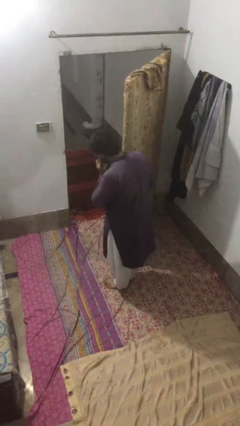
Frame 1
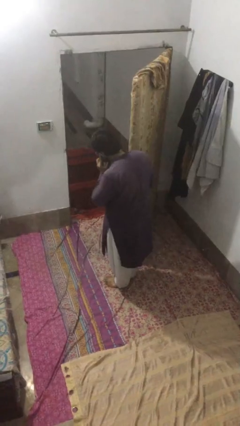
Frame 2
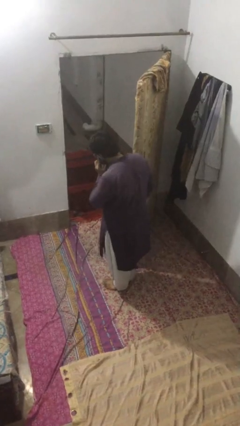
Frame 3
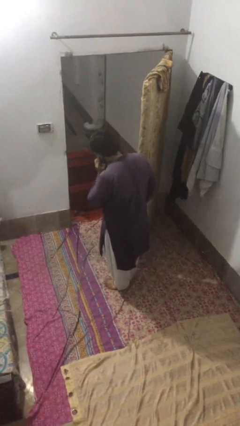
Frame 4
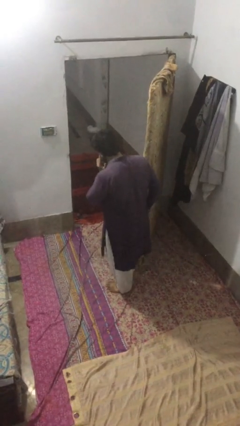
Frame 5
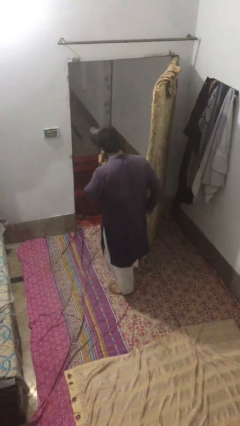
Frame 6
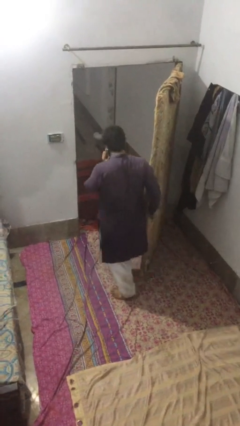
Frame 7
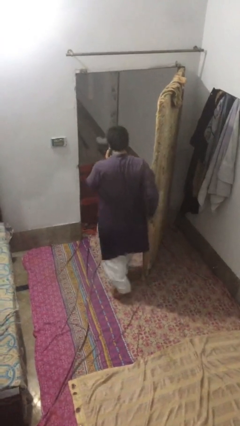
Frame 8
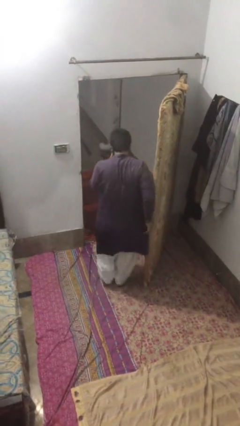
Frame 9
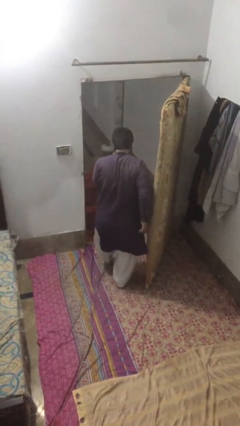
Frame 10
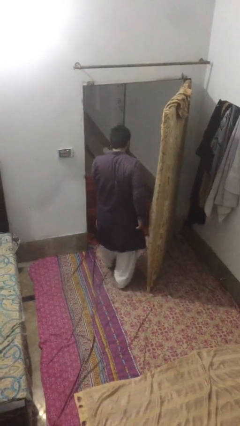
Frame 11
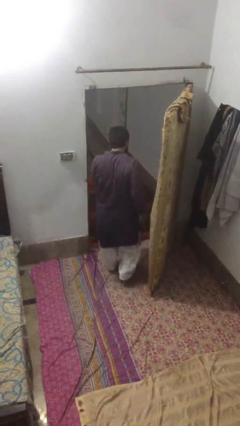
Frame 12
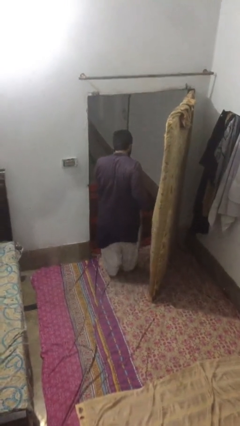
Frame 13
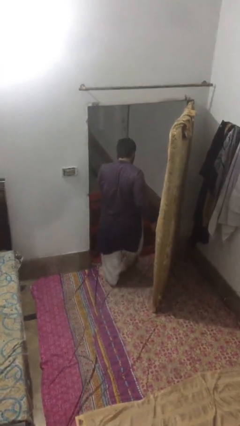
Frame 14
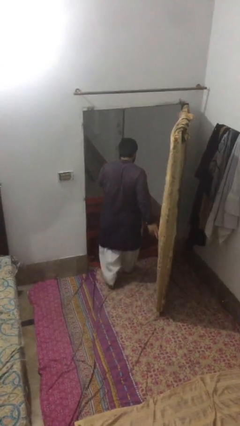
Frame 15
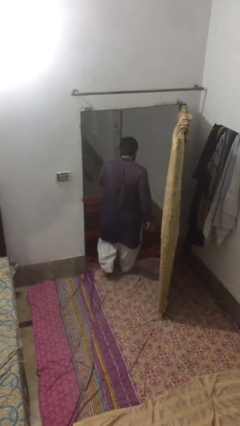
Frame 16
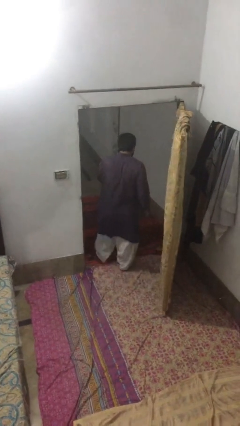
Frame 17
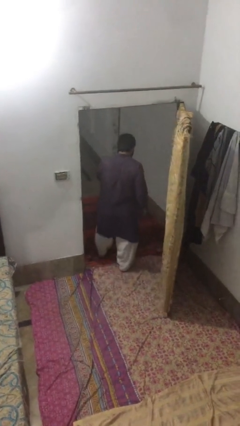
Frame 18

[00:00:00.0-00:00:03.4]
person exits scene through structure

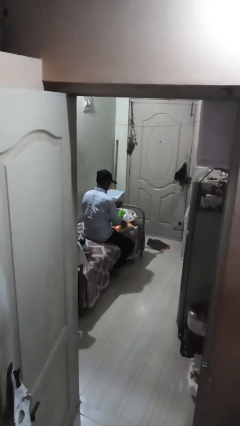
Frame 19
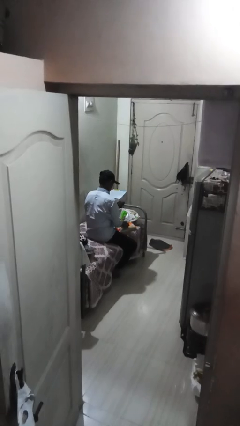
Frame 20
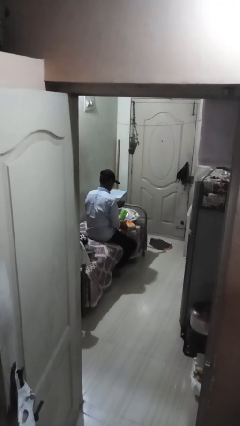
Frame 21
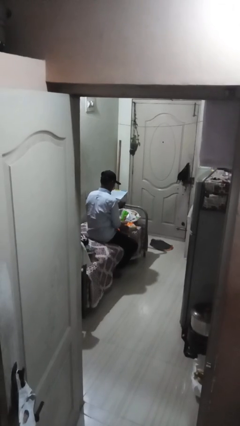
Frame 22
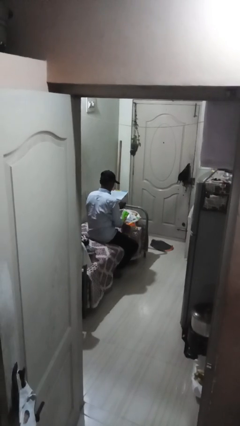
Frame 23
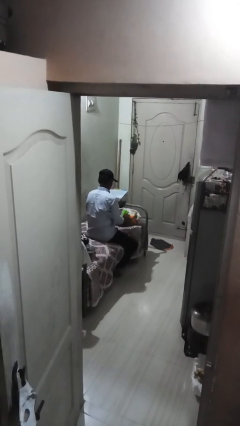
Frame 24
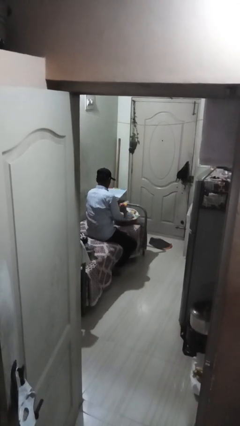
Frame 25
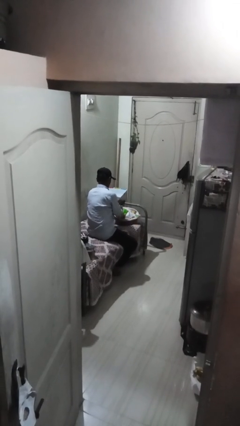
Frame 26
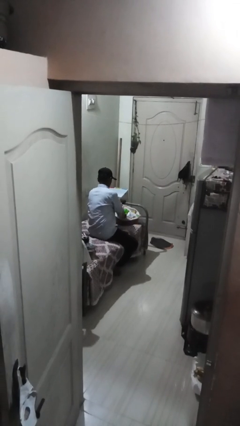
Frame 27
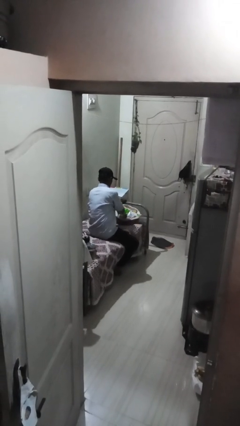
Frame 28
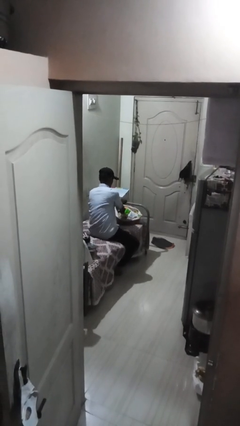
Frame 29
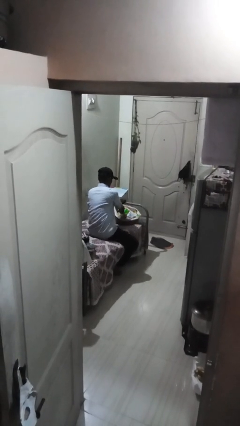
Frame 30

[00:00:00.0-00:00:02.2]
person puts object into bag

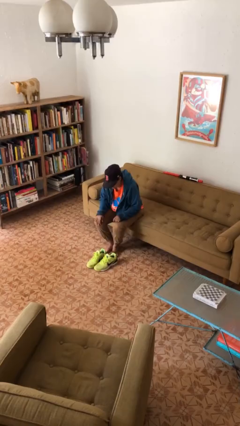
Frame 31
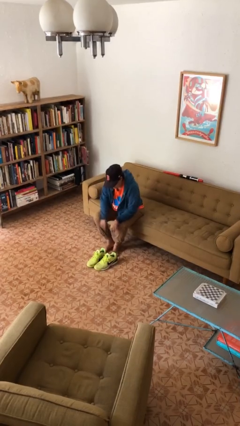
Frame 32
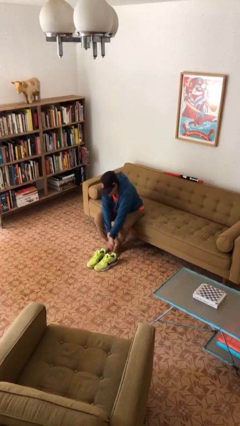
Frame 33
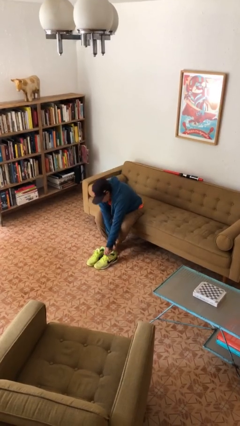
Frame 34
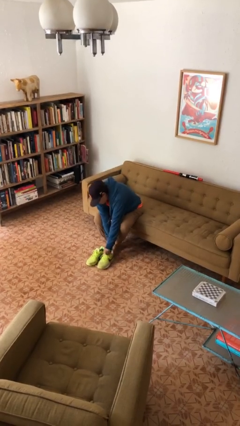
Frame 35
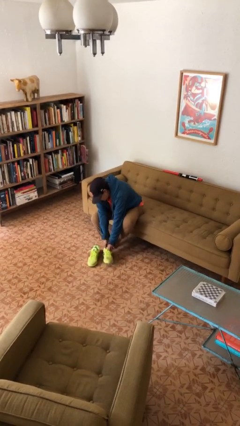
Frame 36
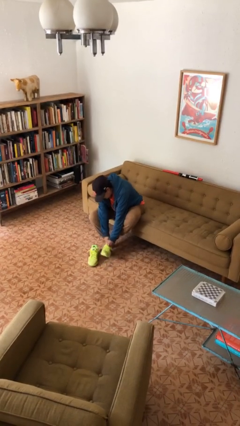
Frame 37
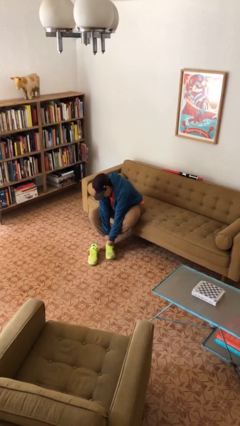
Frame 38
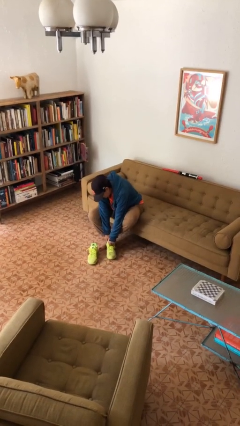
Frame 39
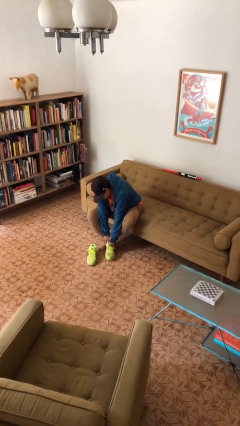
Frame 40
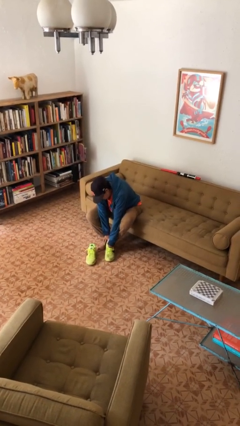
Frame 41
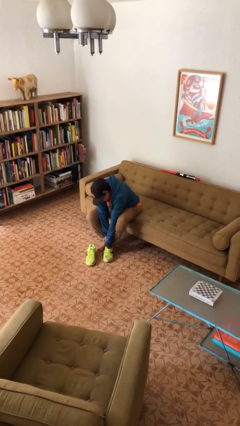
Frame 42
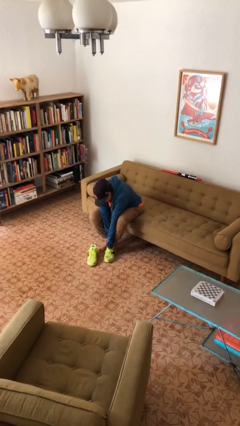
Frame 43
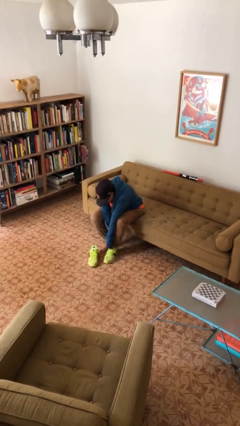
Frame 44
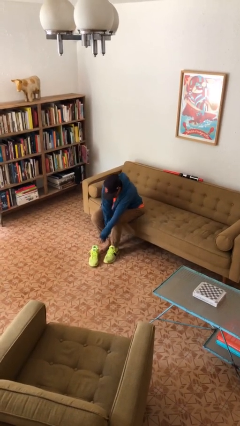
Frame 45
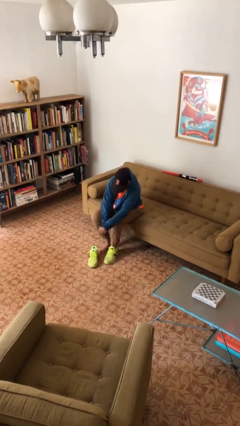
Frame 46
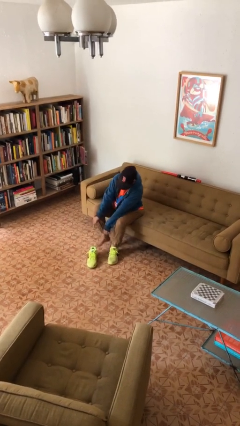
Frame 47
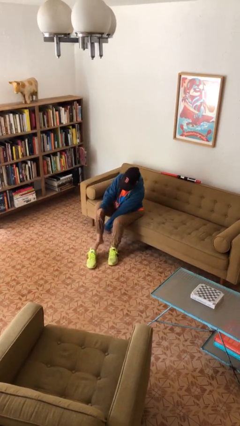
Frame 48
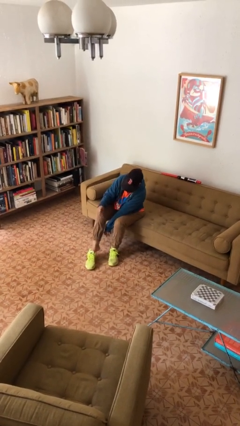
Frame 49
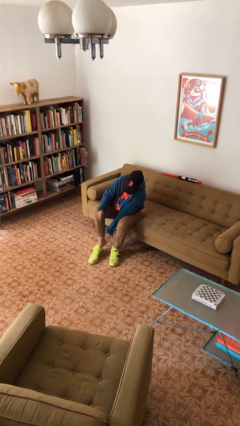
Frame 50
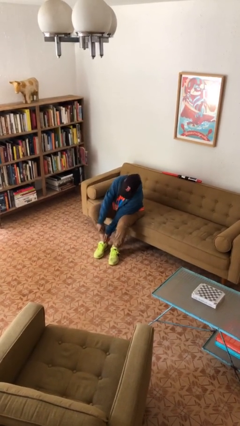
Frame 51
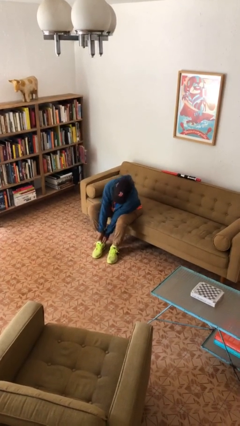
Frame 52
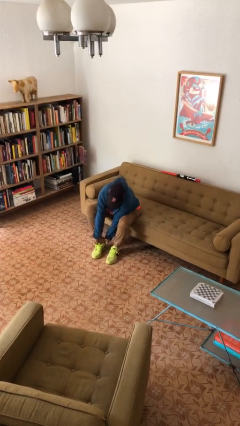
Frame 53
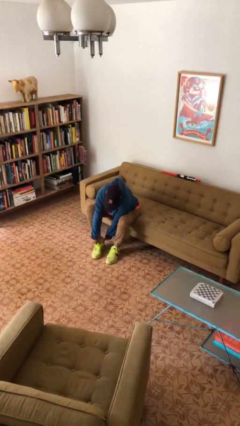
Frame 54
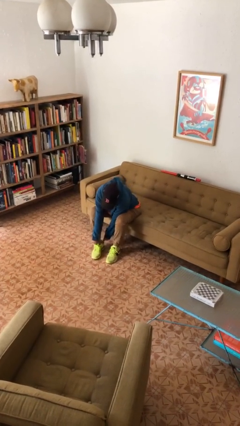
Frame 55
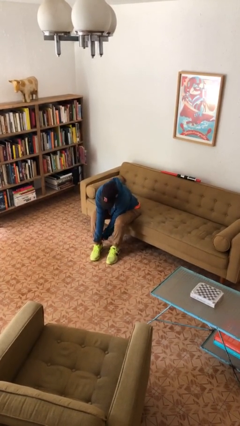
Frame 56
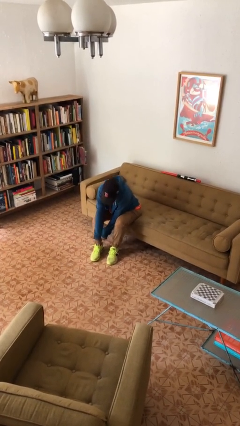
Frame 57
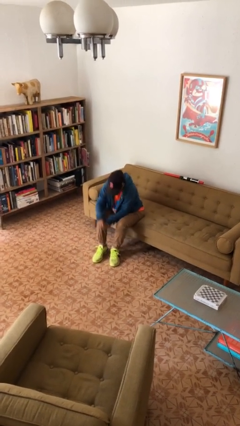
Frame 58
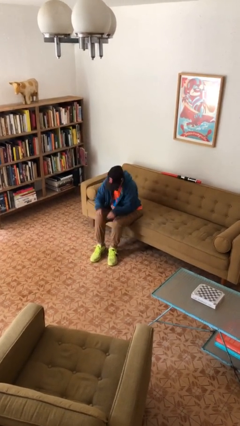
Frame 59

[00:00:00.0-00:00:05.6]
person puts on shoes

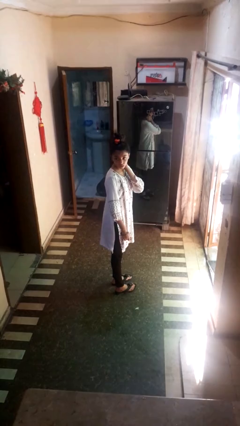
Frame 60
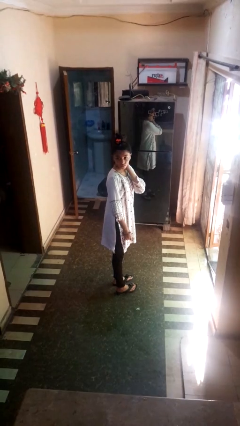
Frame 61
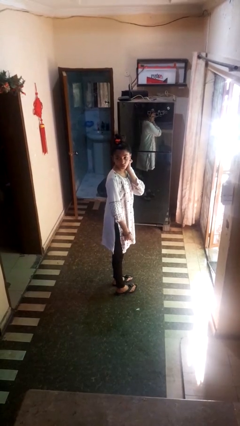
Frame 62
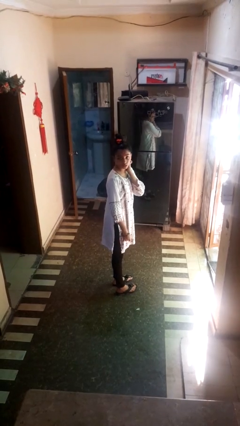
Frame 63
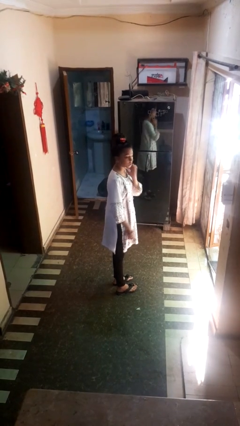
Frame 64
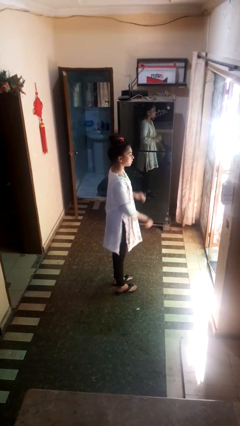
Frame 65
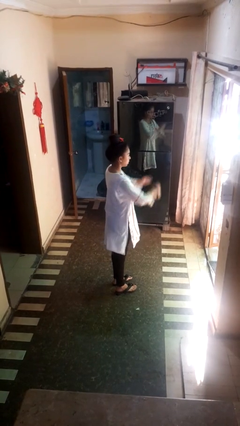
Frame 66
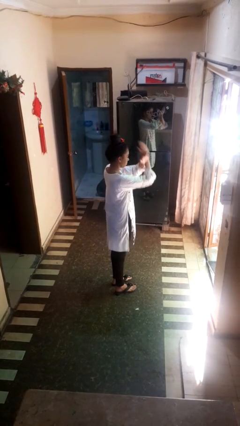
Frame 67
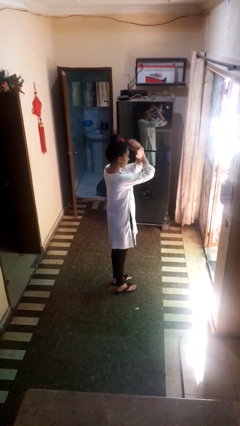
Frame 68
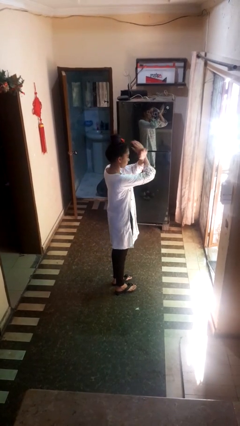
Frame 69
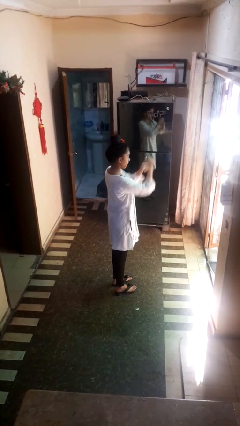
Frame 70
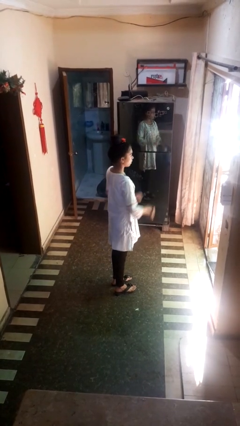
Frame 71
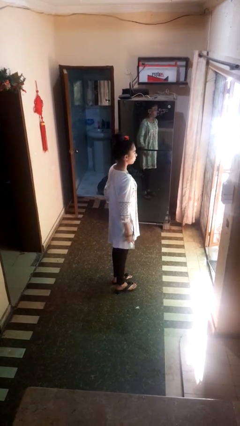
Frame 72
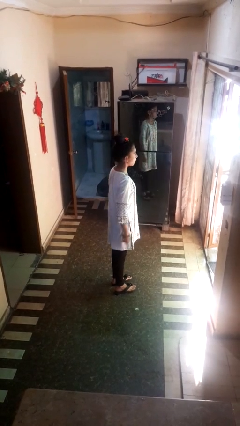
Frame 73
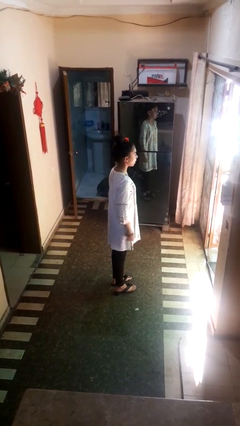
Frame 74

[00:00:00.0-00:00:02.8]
person gestures arms x

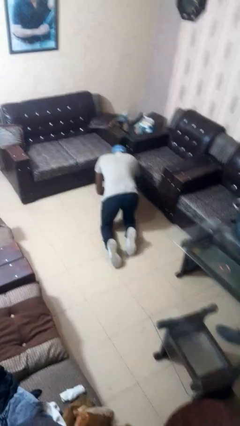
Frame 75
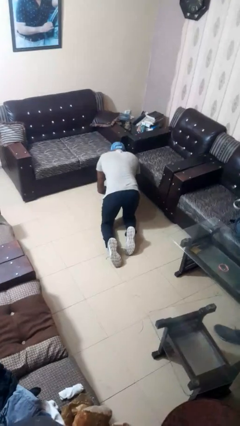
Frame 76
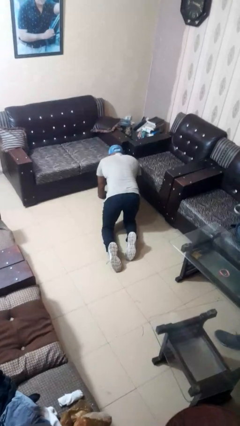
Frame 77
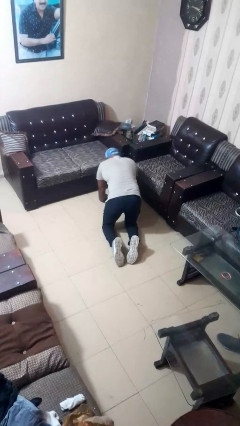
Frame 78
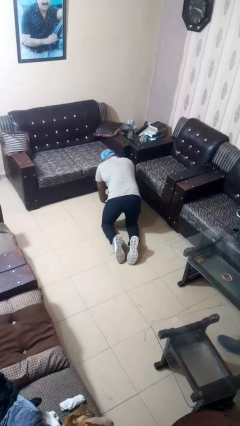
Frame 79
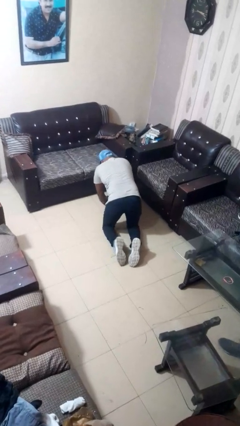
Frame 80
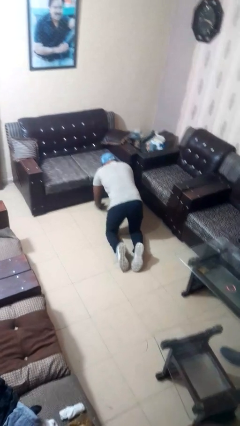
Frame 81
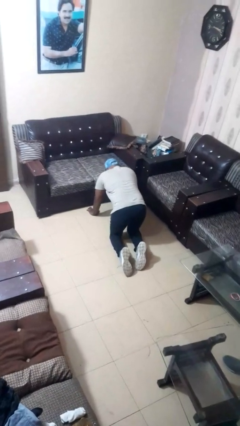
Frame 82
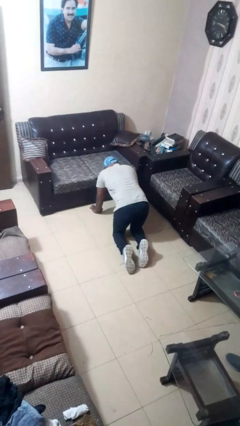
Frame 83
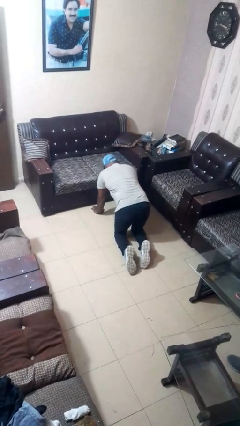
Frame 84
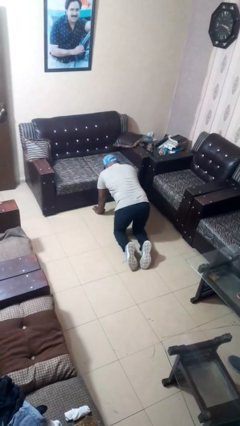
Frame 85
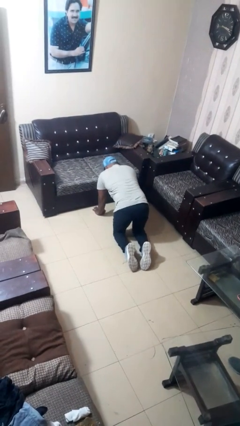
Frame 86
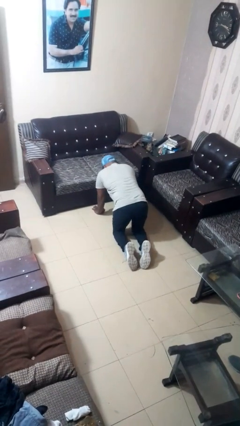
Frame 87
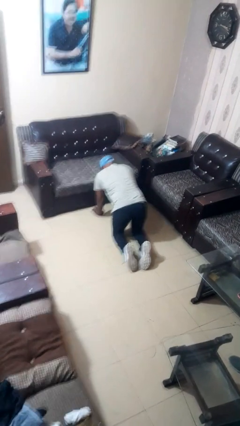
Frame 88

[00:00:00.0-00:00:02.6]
person crawls

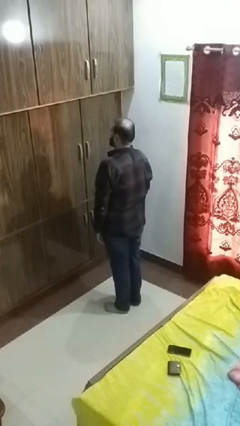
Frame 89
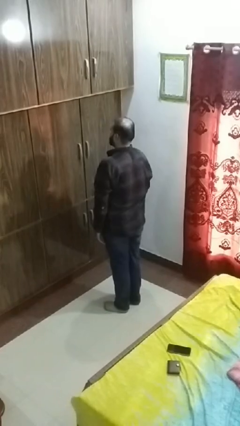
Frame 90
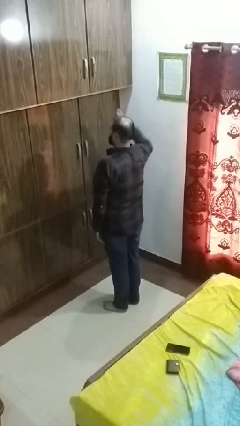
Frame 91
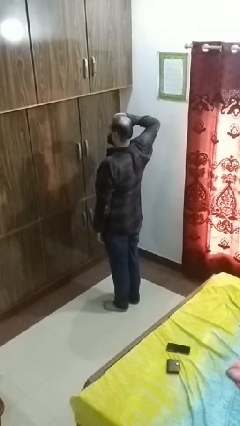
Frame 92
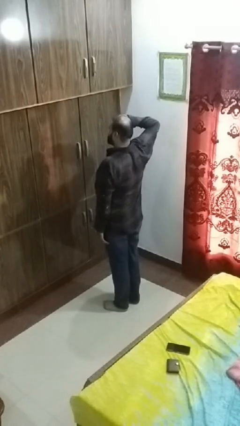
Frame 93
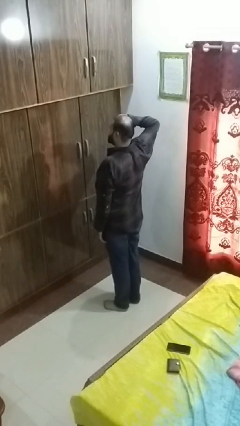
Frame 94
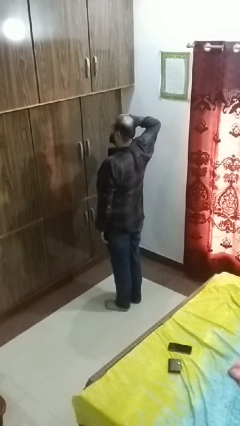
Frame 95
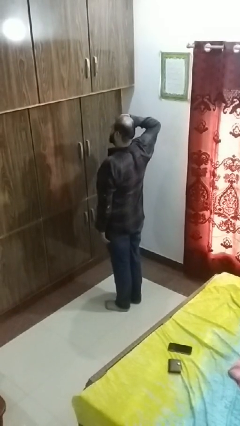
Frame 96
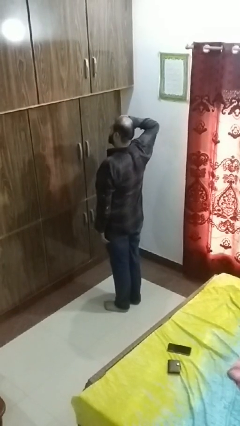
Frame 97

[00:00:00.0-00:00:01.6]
person salutes
